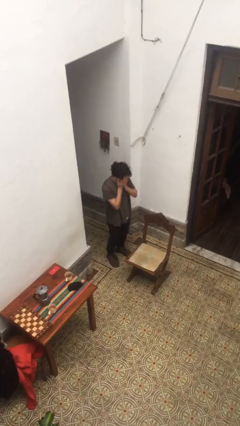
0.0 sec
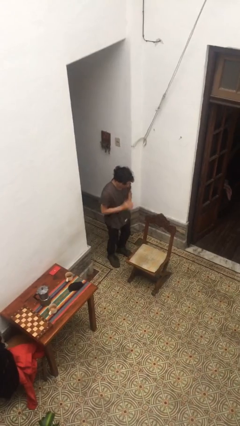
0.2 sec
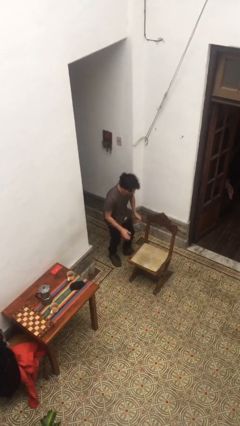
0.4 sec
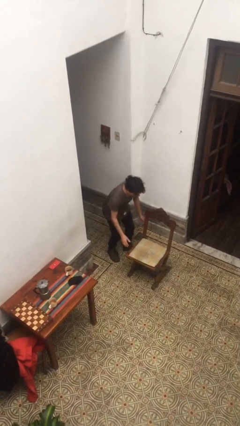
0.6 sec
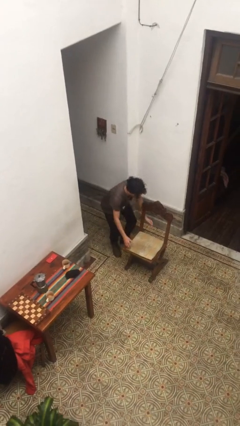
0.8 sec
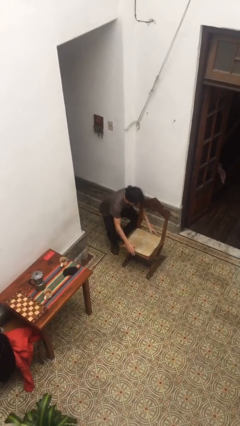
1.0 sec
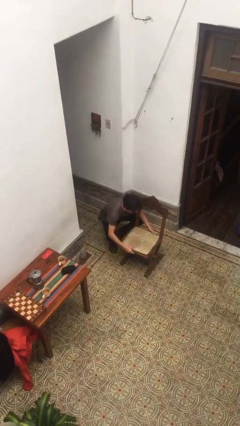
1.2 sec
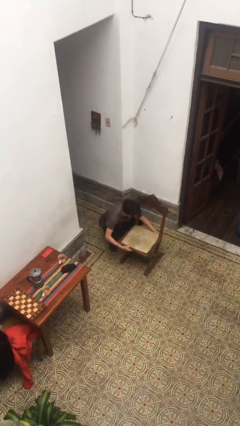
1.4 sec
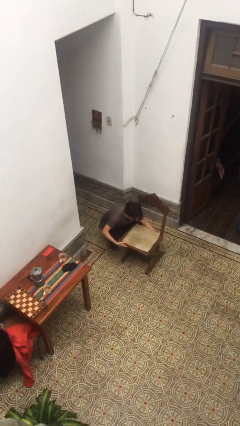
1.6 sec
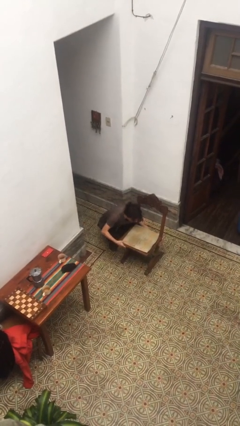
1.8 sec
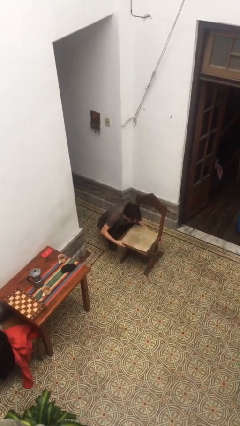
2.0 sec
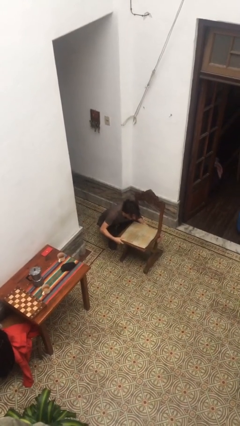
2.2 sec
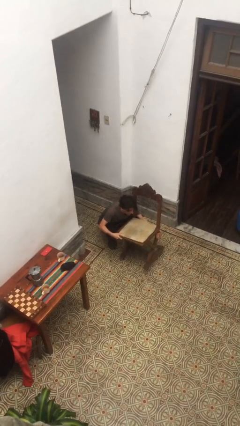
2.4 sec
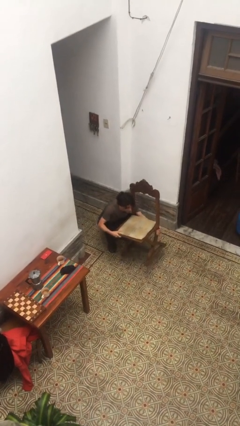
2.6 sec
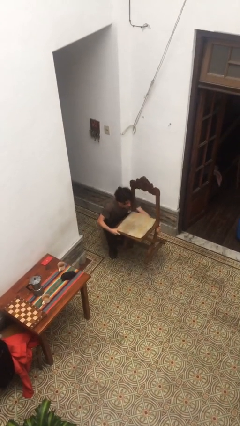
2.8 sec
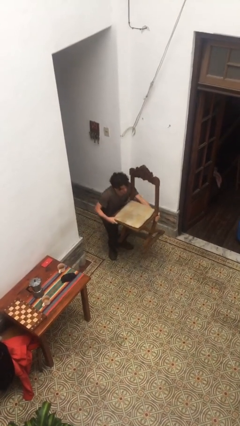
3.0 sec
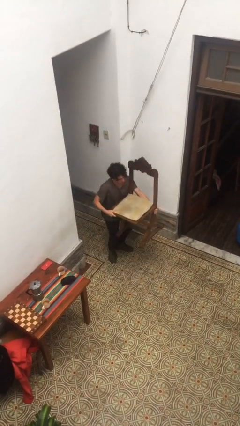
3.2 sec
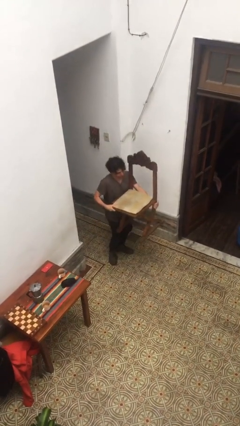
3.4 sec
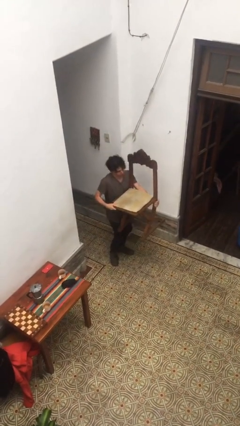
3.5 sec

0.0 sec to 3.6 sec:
person picks up object from floor

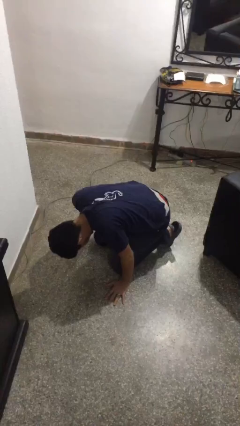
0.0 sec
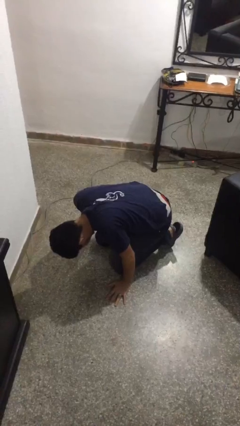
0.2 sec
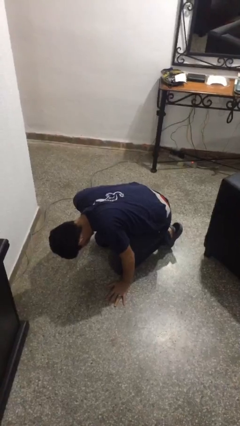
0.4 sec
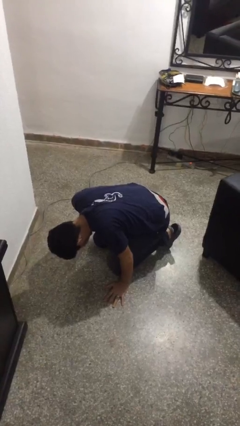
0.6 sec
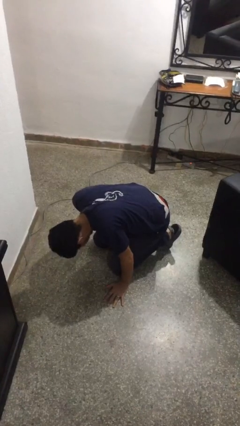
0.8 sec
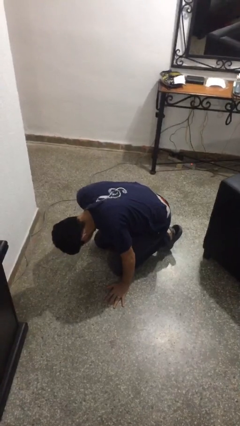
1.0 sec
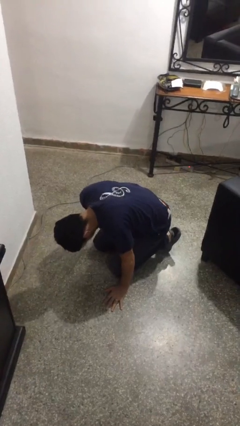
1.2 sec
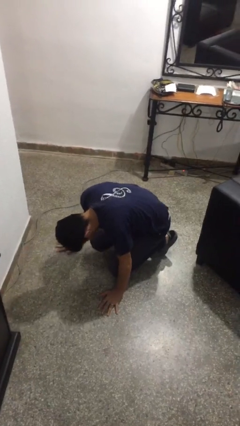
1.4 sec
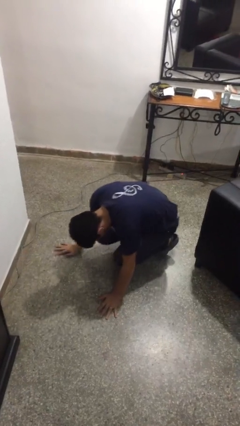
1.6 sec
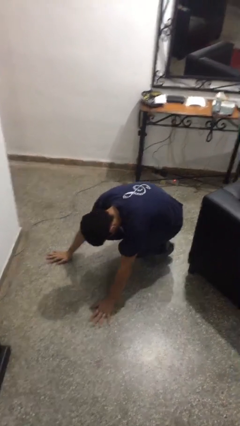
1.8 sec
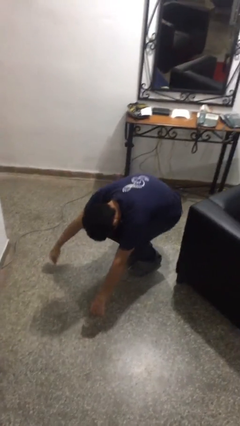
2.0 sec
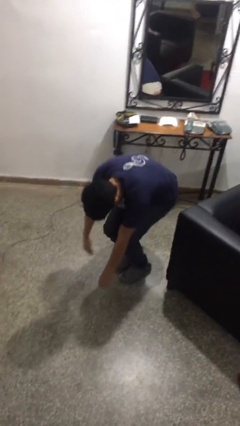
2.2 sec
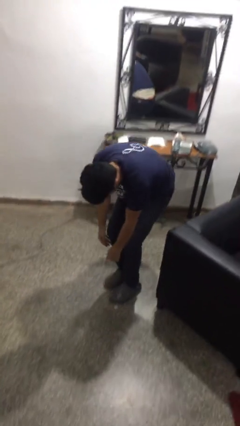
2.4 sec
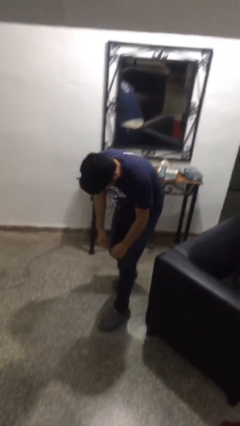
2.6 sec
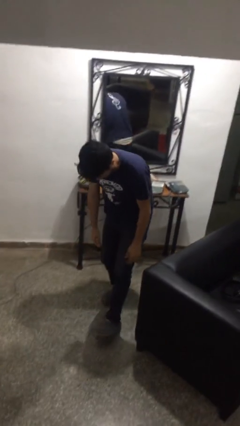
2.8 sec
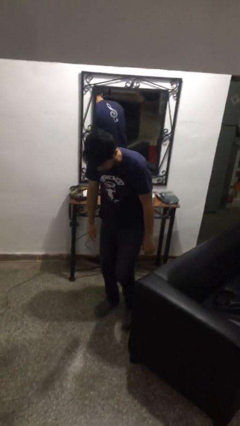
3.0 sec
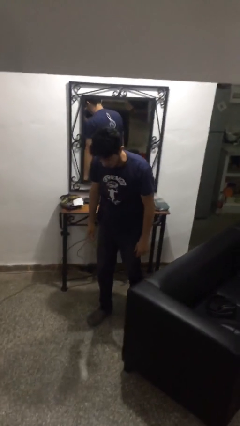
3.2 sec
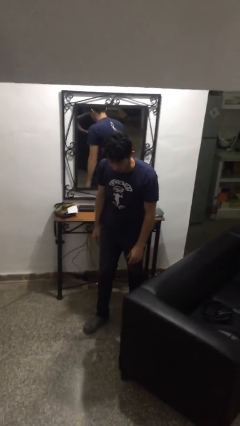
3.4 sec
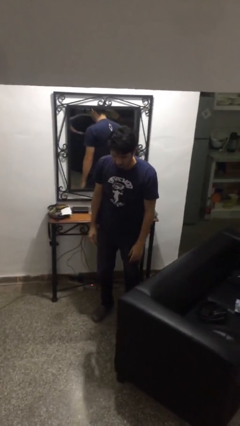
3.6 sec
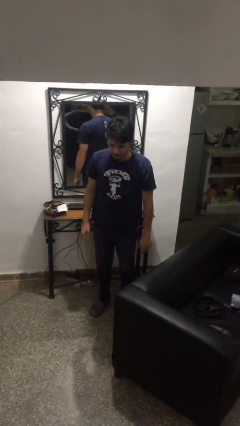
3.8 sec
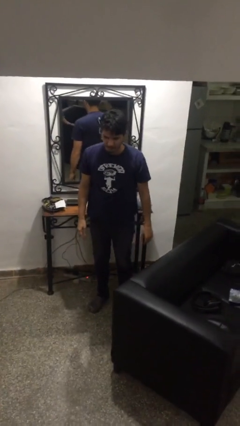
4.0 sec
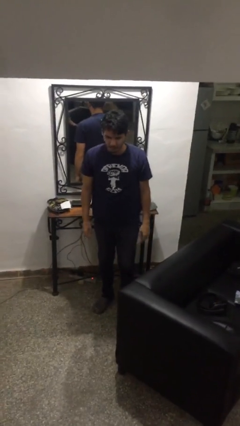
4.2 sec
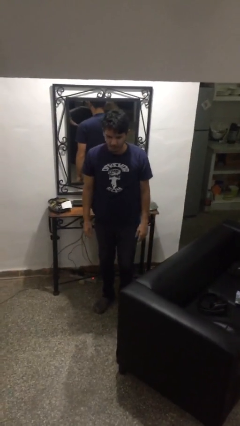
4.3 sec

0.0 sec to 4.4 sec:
person stands up from floor

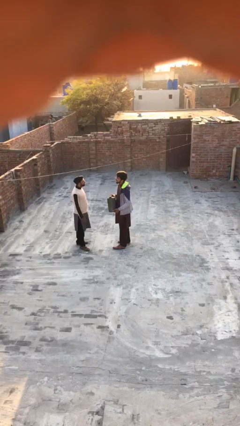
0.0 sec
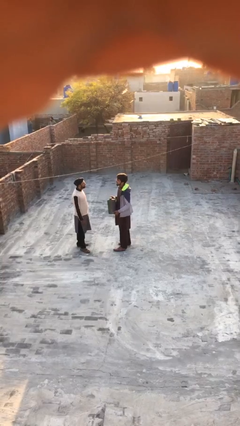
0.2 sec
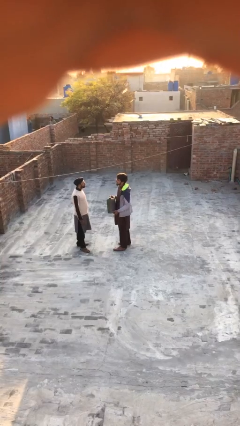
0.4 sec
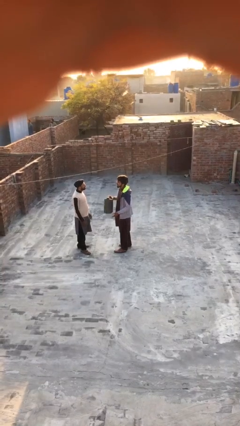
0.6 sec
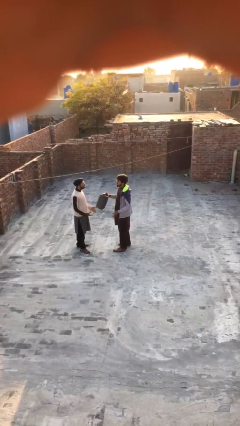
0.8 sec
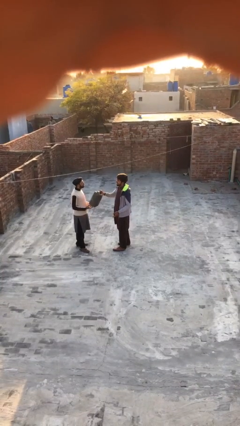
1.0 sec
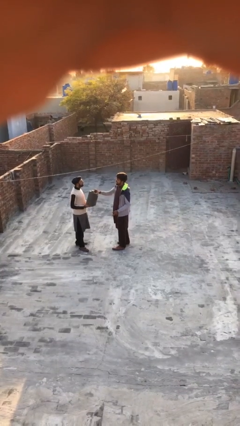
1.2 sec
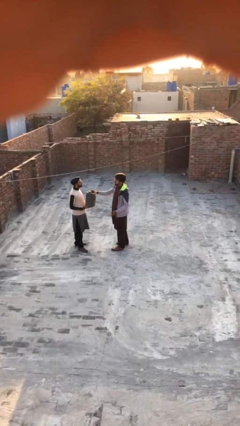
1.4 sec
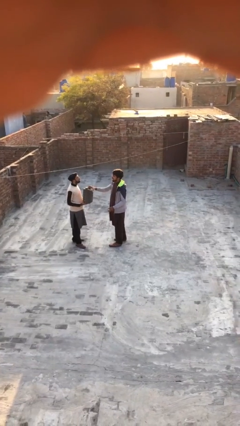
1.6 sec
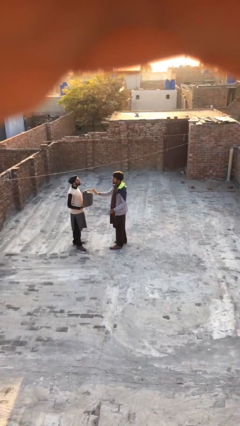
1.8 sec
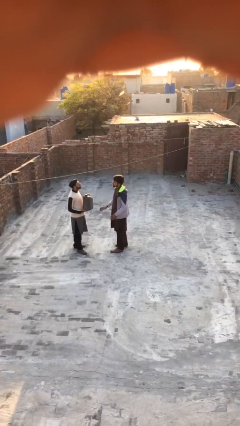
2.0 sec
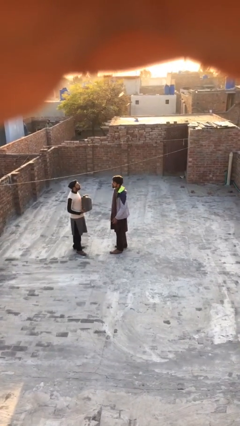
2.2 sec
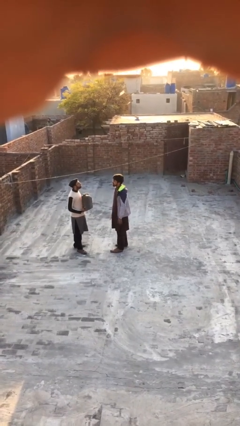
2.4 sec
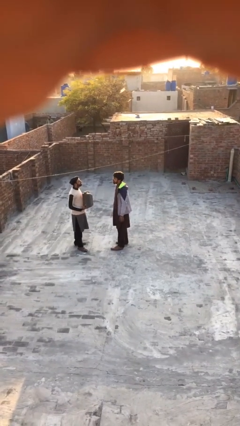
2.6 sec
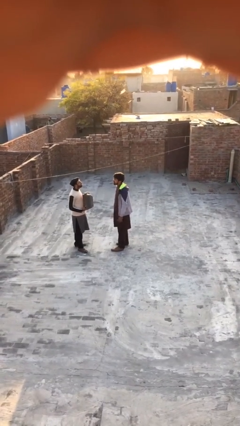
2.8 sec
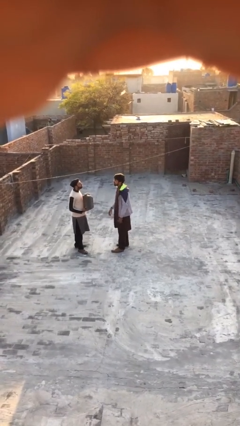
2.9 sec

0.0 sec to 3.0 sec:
person transfers object to person

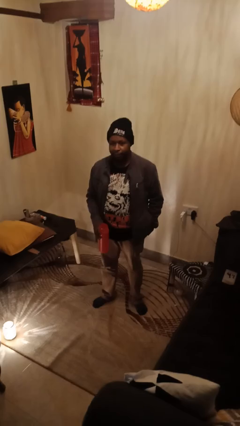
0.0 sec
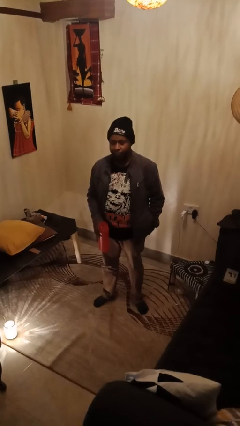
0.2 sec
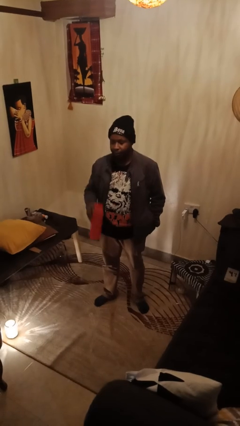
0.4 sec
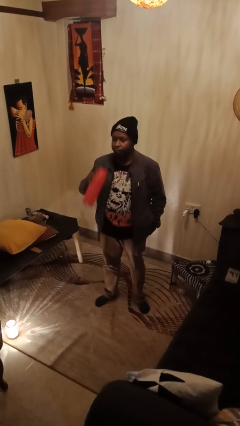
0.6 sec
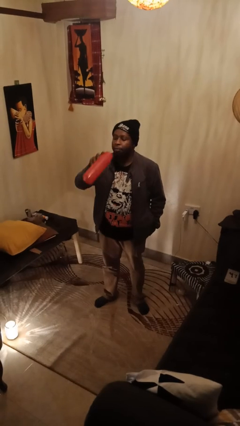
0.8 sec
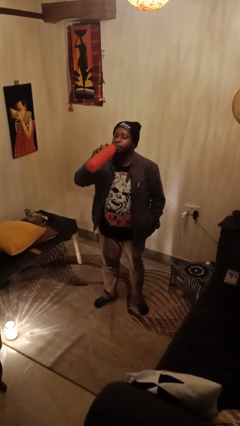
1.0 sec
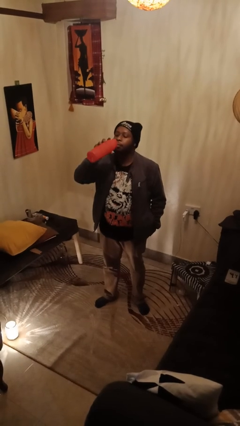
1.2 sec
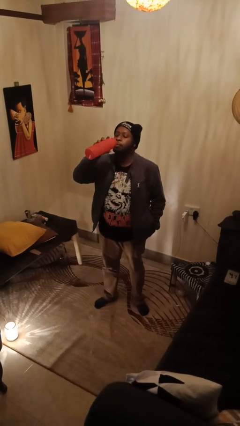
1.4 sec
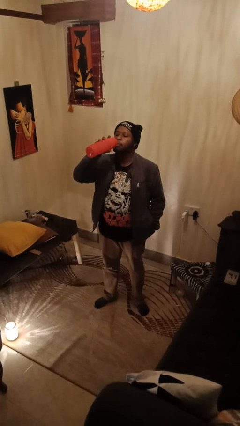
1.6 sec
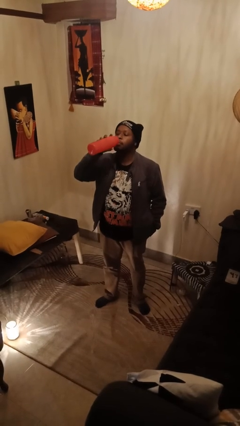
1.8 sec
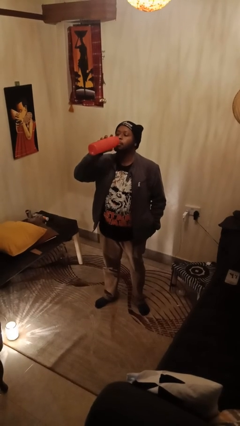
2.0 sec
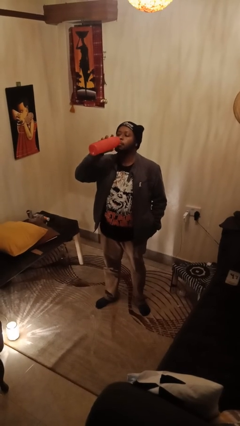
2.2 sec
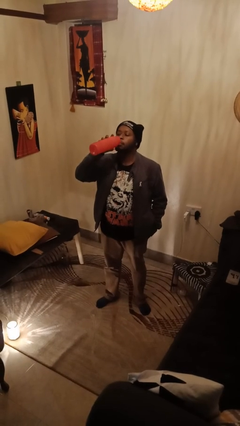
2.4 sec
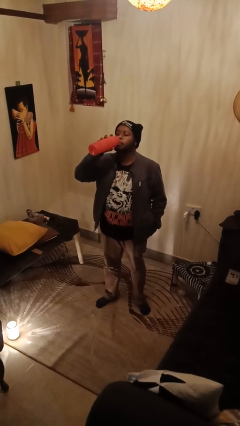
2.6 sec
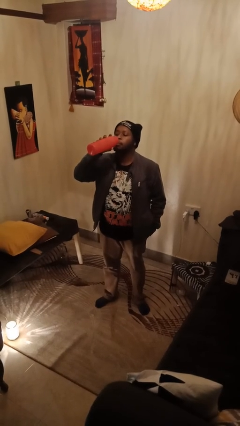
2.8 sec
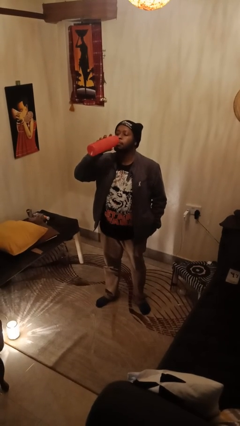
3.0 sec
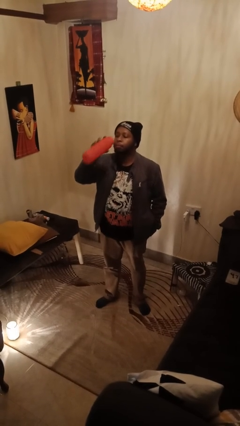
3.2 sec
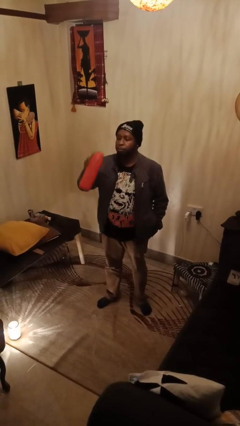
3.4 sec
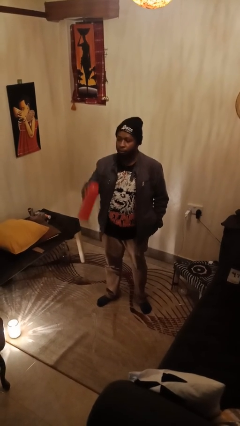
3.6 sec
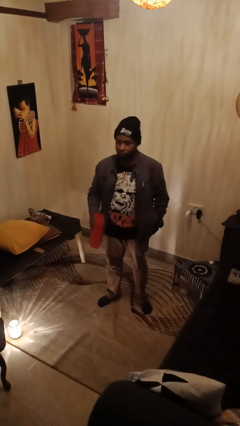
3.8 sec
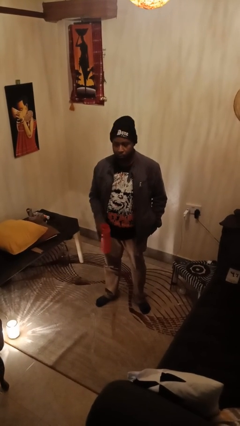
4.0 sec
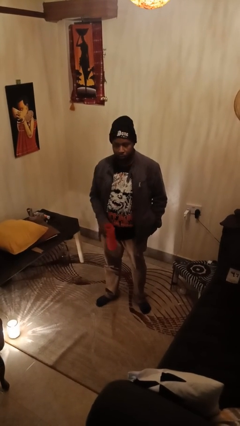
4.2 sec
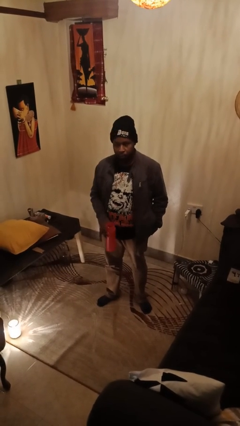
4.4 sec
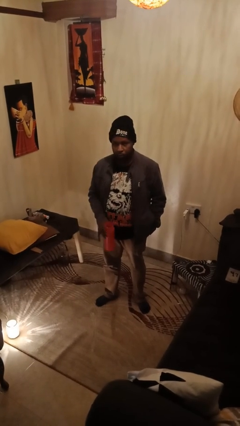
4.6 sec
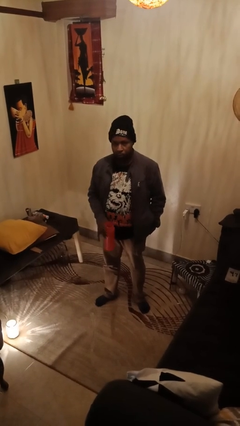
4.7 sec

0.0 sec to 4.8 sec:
person drinks from bottle

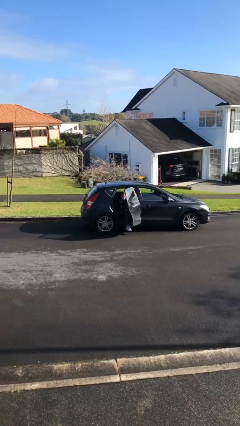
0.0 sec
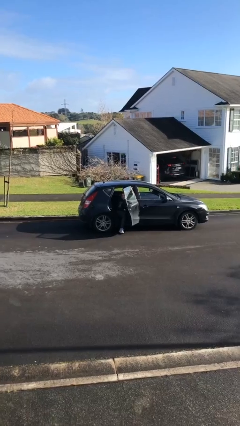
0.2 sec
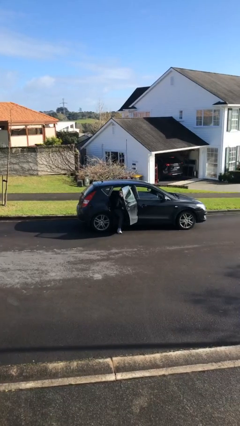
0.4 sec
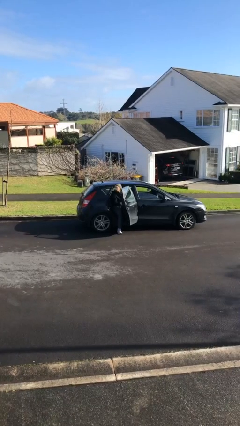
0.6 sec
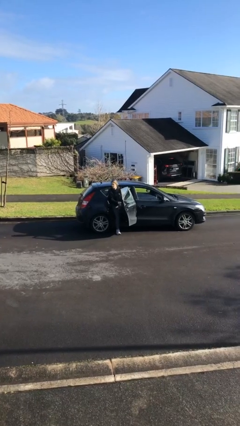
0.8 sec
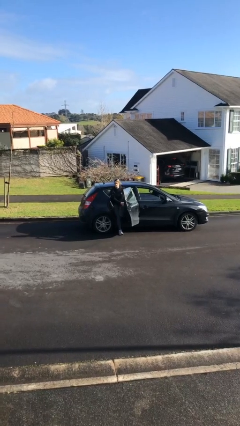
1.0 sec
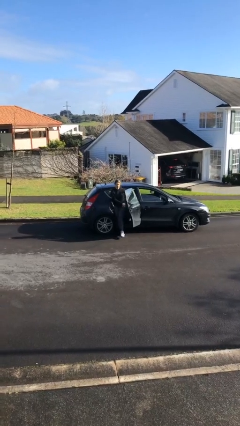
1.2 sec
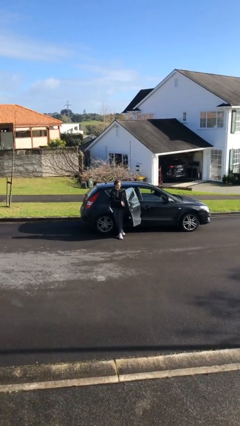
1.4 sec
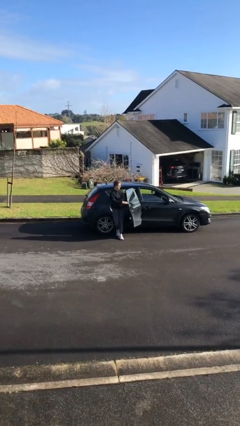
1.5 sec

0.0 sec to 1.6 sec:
person exits car

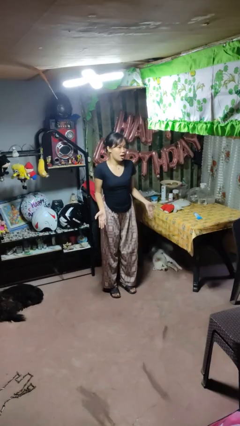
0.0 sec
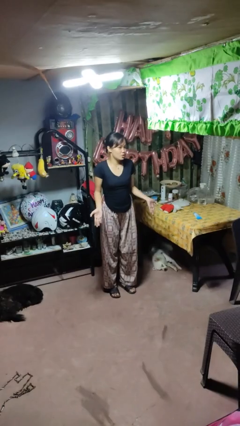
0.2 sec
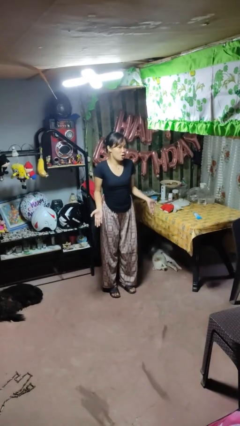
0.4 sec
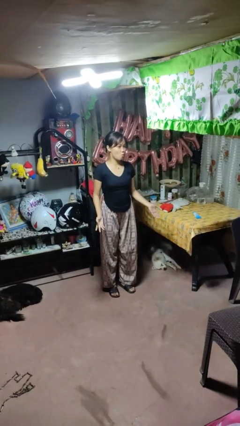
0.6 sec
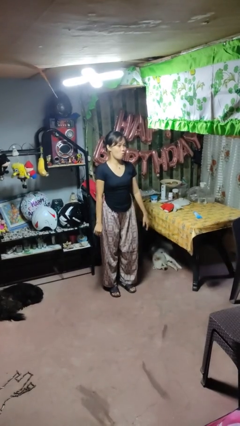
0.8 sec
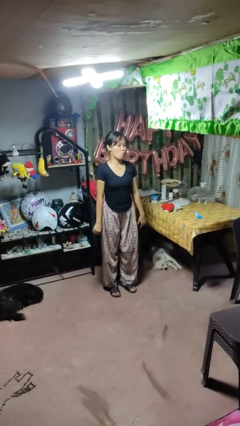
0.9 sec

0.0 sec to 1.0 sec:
person shrugs
